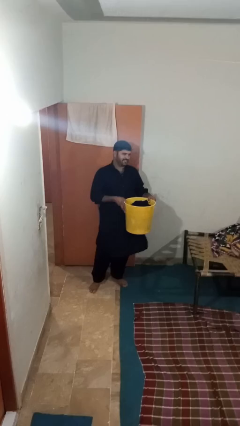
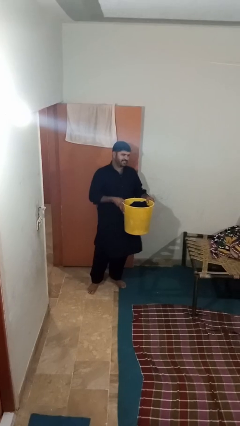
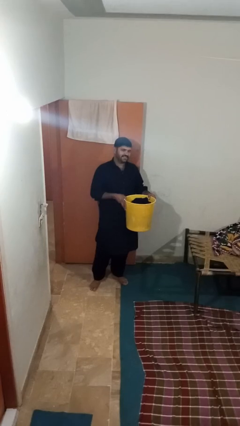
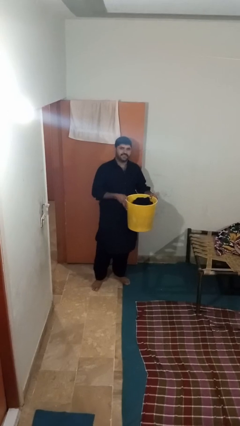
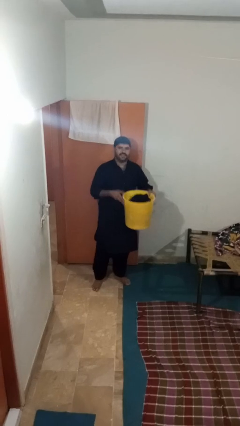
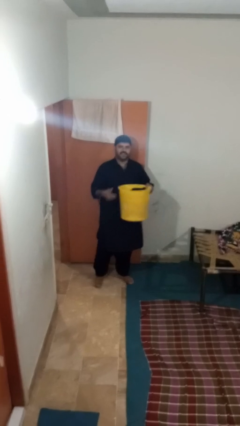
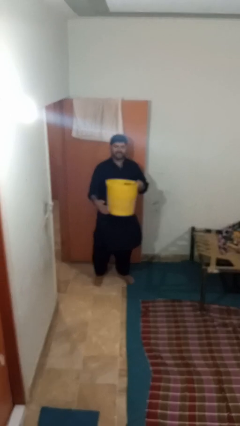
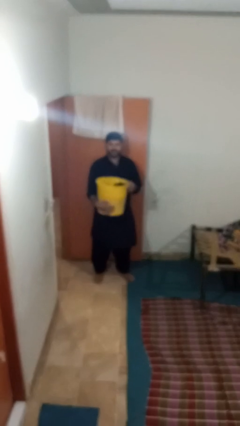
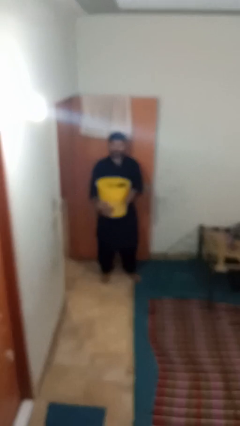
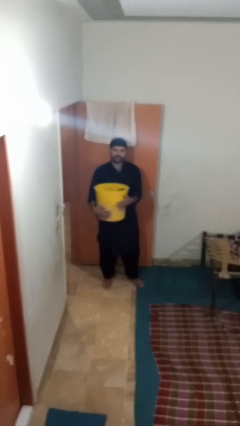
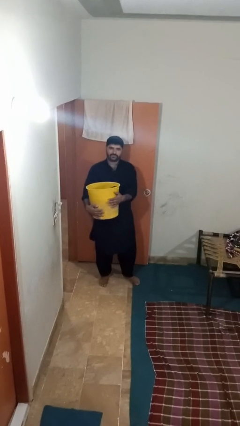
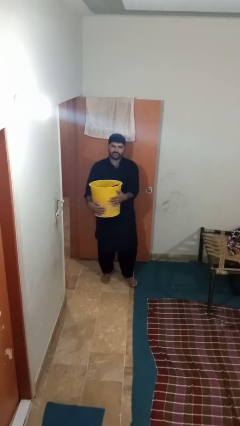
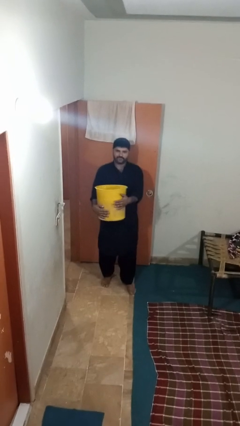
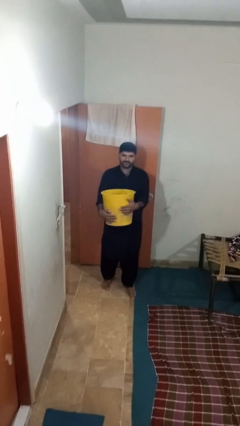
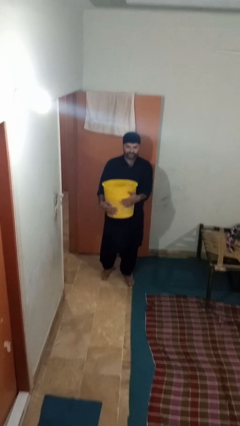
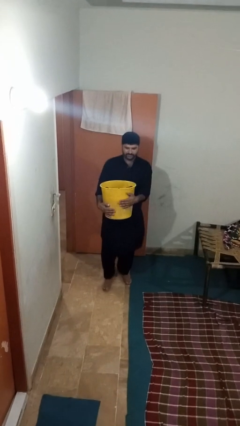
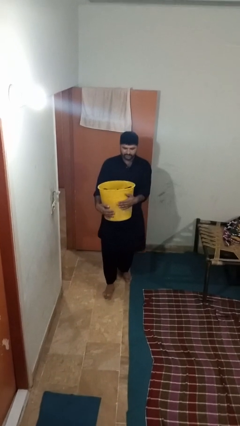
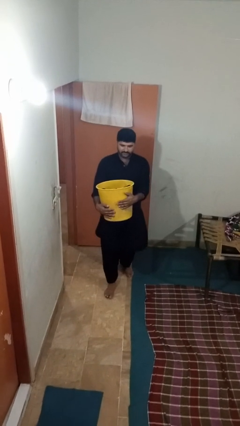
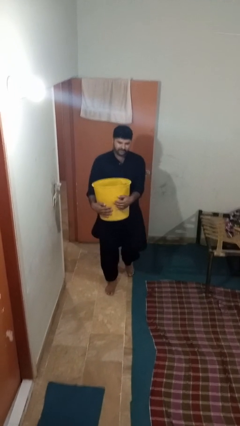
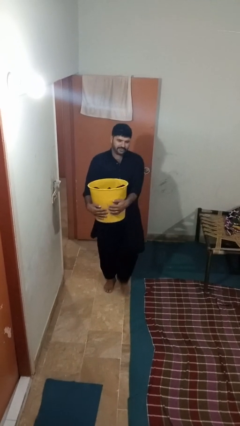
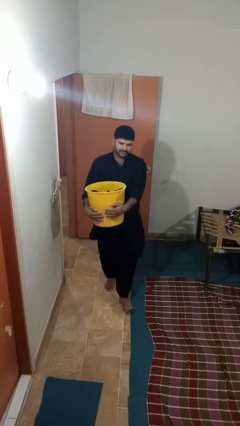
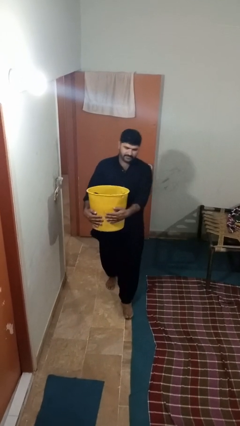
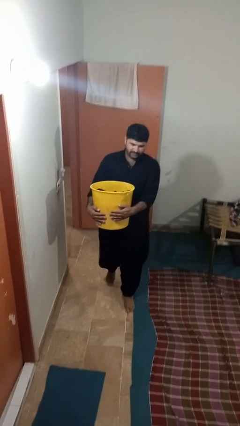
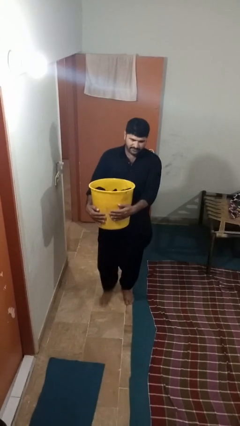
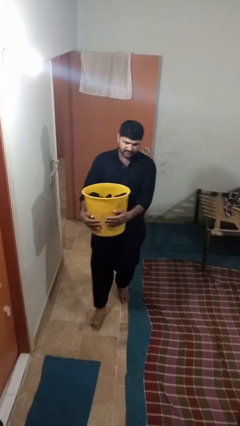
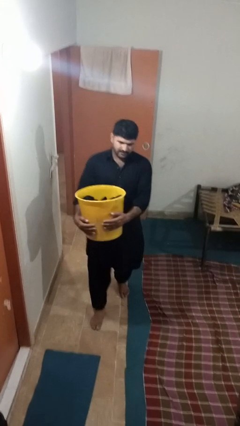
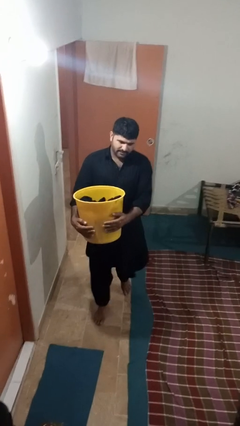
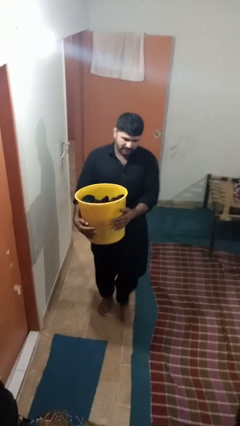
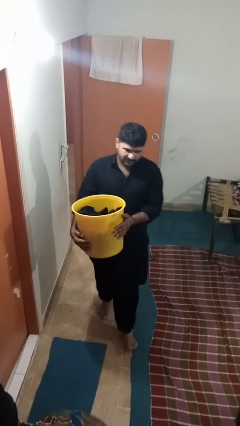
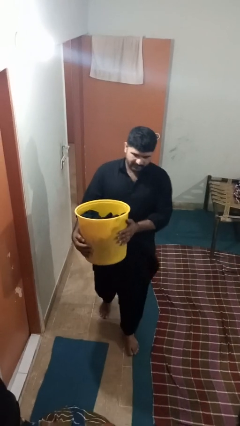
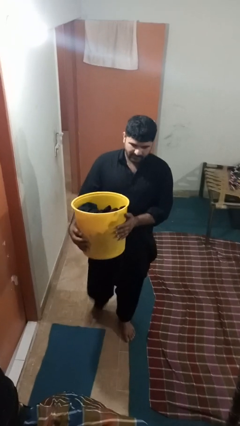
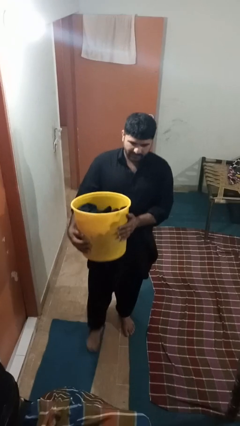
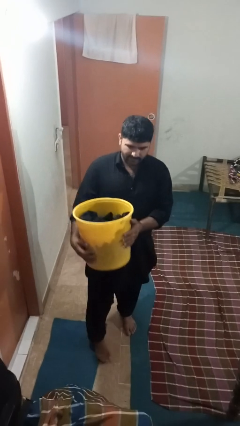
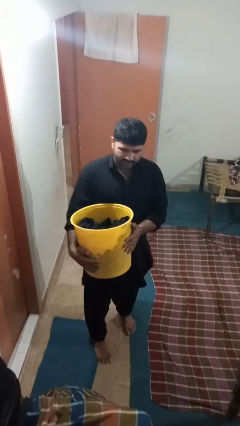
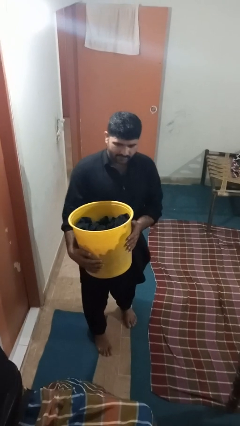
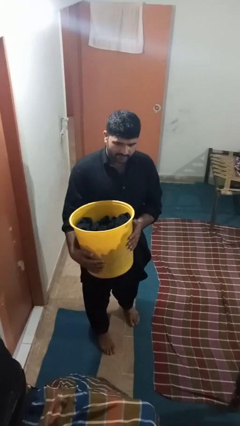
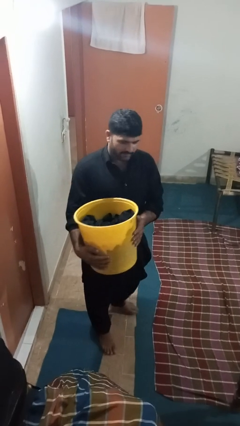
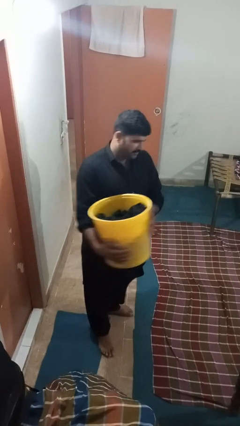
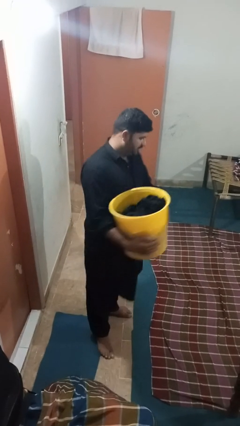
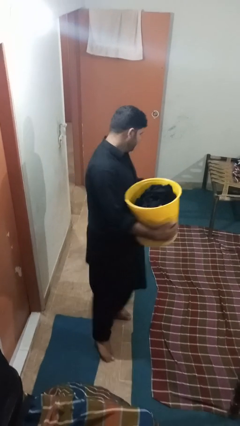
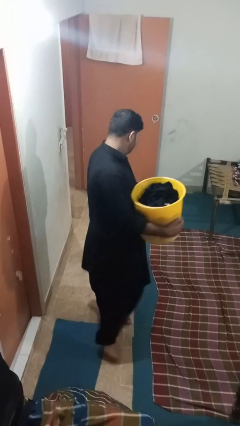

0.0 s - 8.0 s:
person carries laundry basket

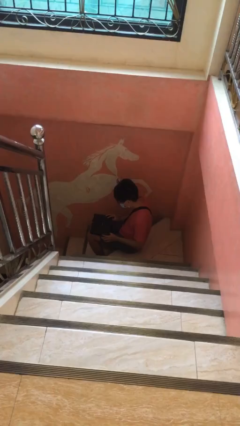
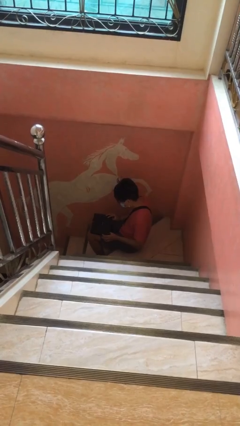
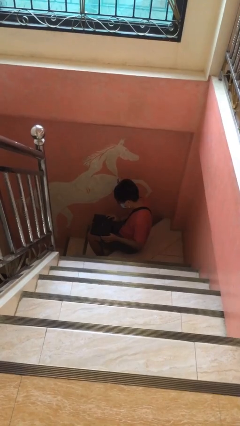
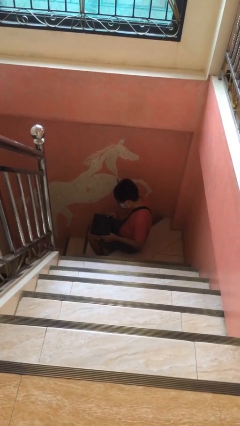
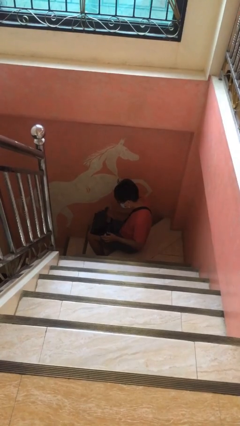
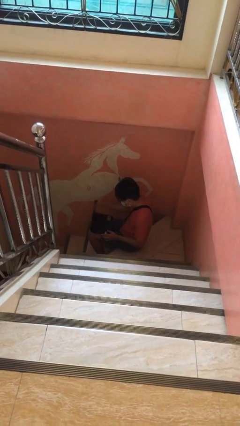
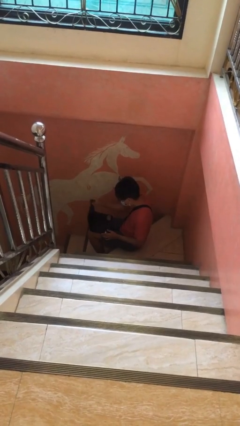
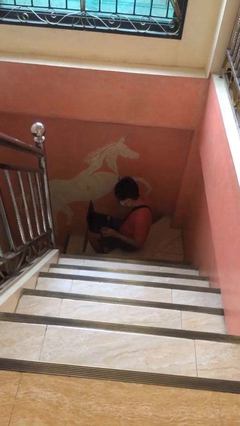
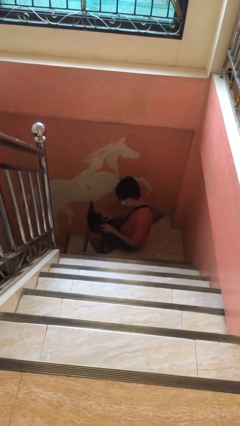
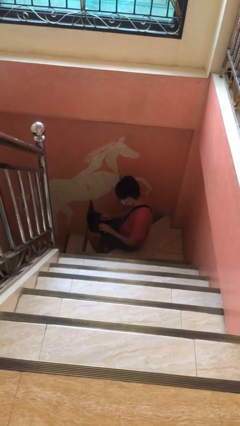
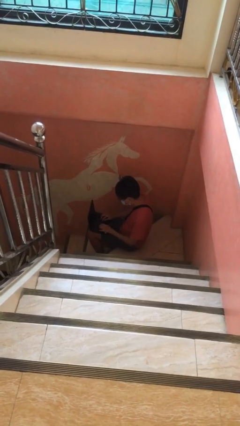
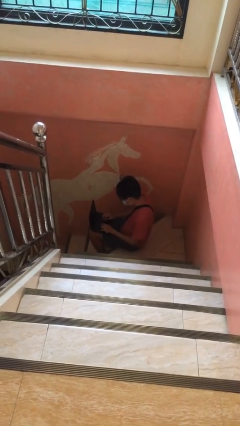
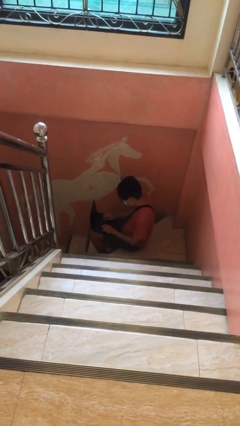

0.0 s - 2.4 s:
person interacts with laptop

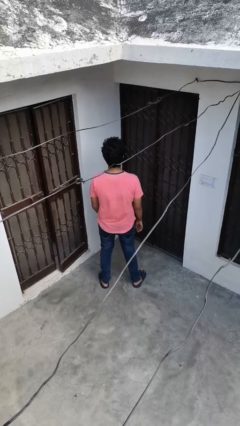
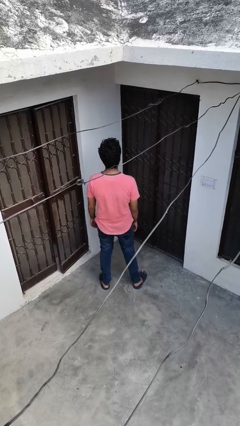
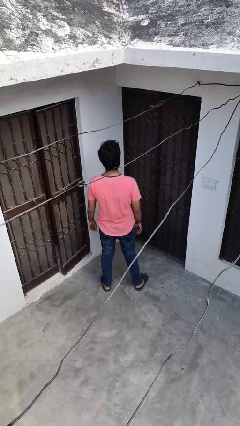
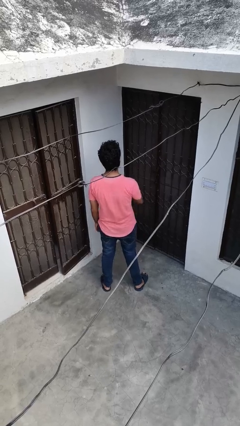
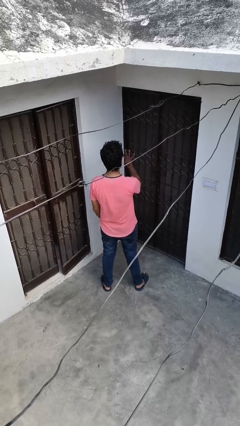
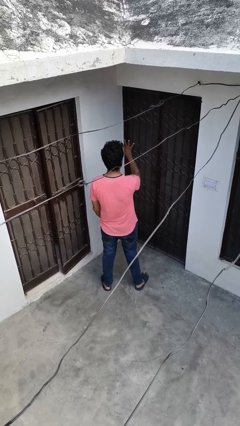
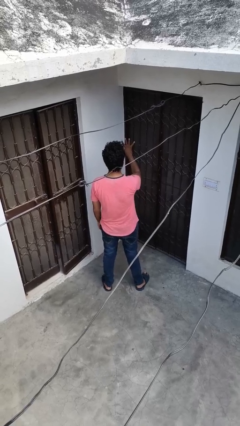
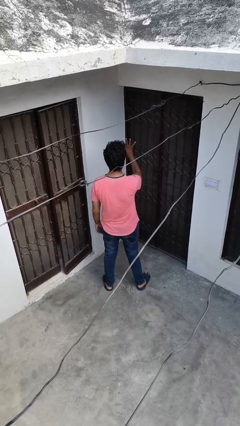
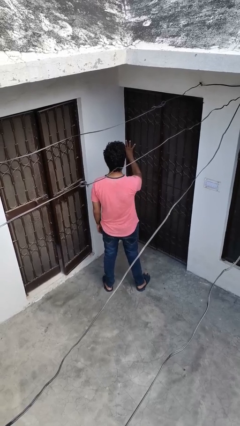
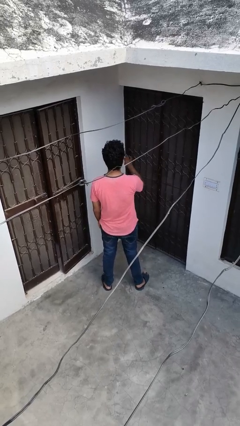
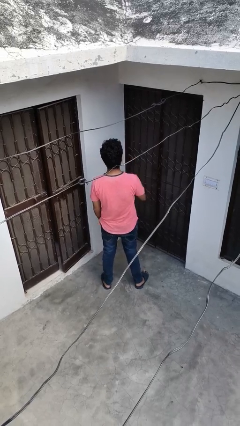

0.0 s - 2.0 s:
person gestures number four

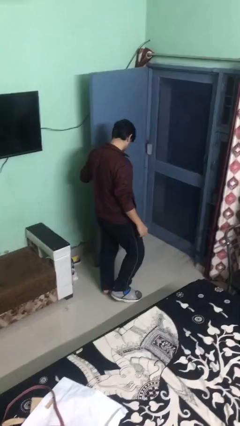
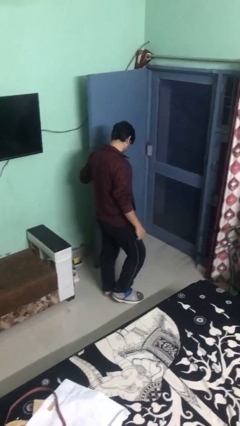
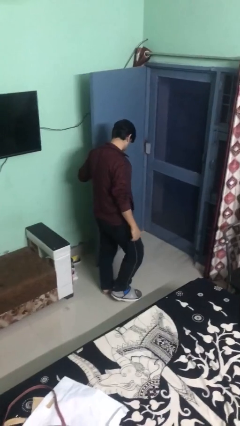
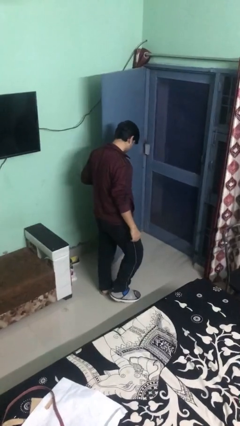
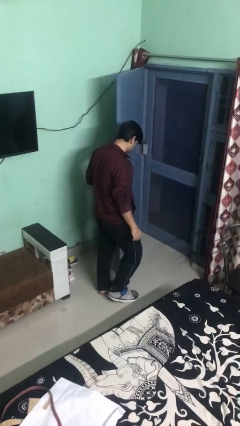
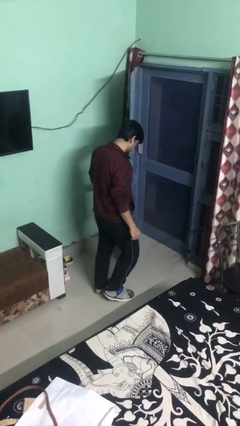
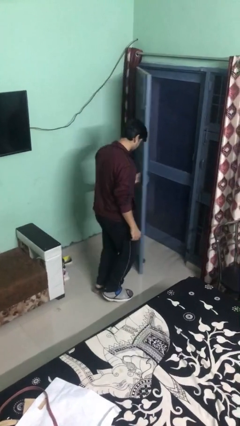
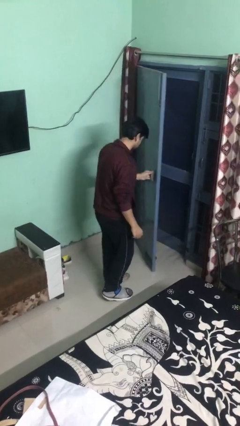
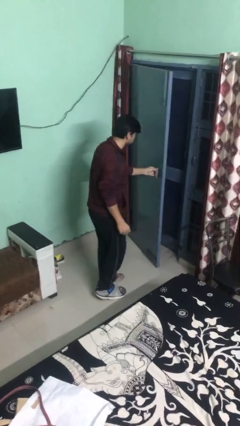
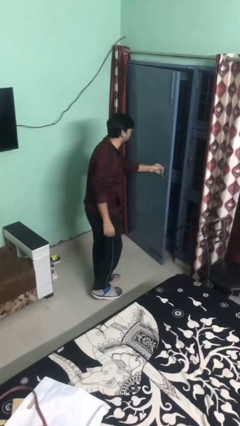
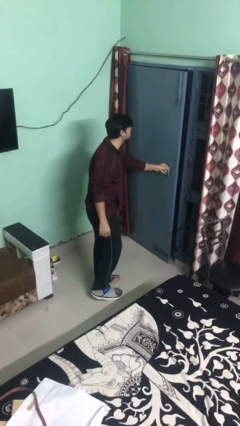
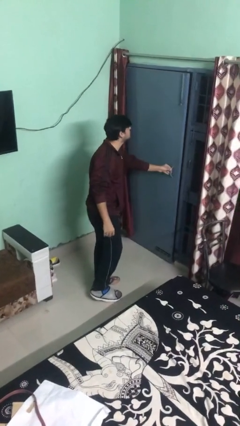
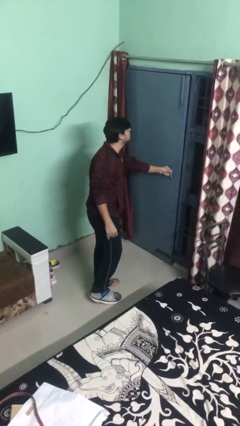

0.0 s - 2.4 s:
person closes facility door

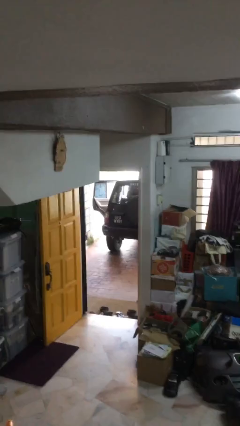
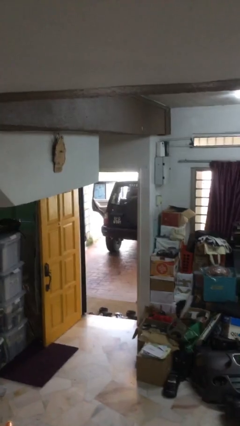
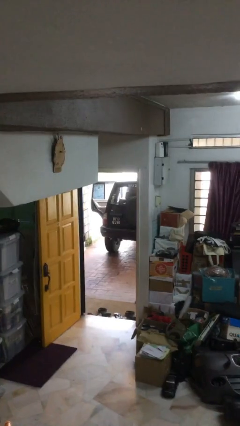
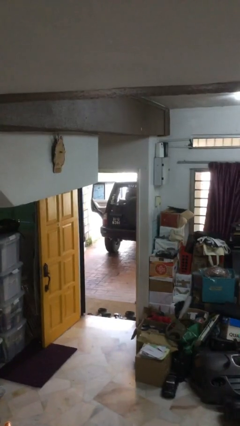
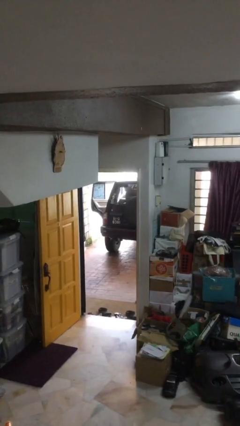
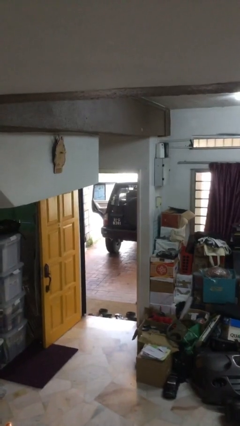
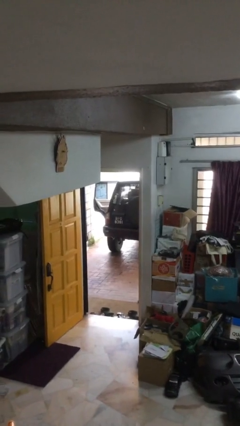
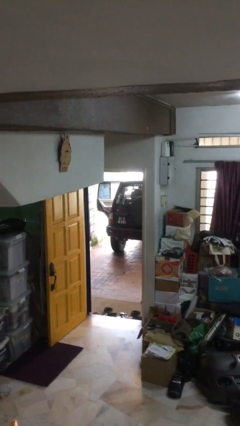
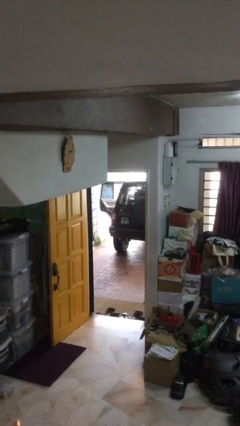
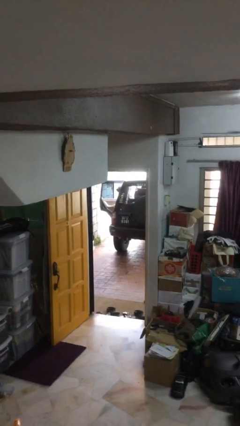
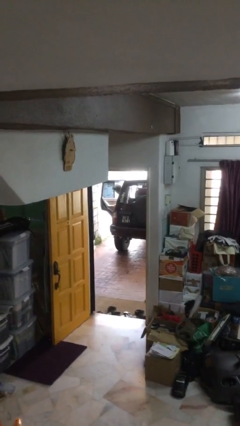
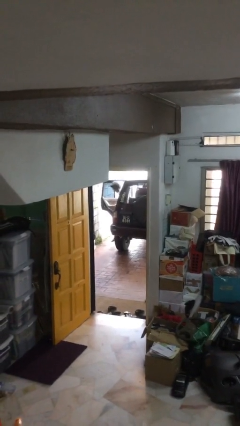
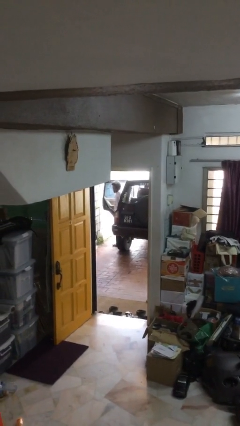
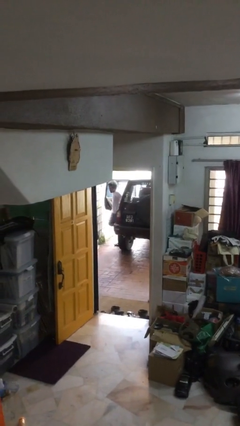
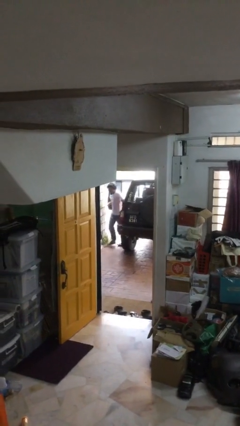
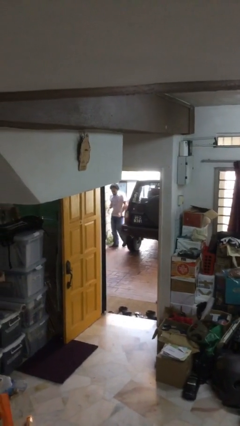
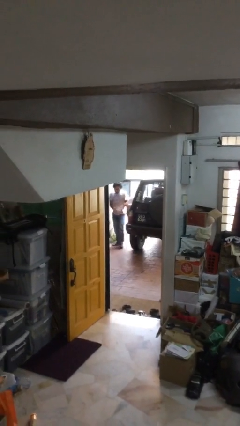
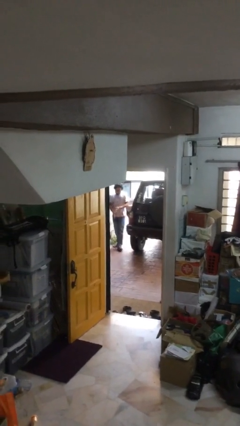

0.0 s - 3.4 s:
person exits car
